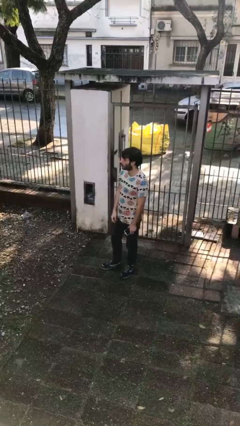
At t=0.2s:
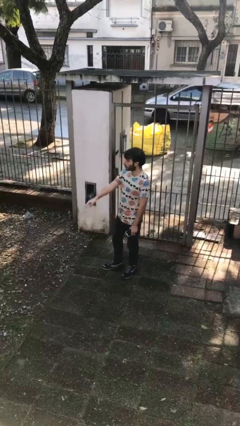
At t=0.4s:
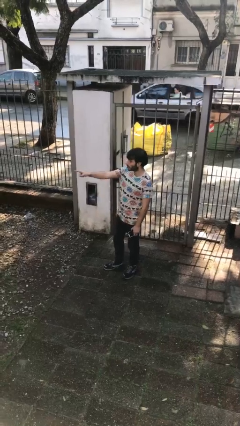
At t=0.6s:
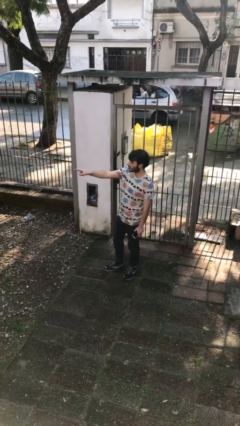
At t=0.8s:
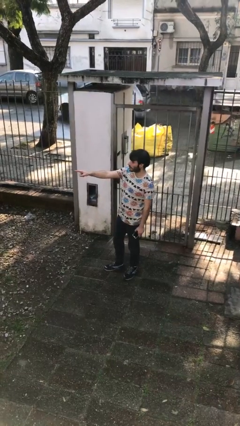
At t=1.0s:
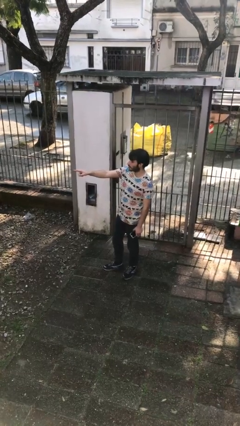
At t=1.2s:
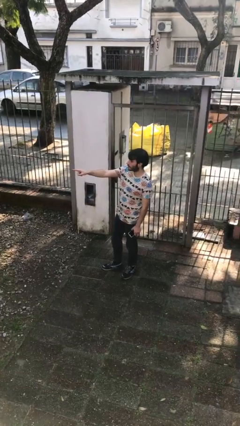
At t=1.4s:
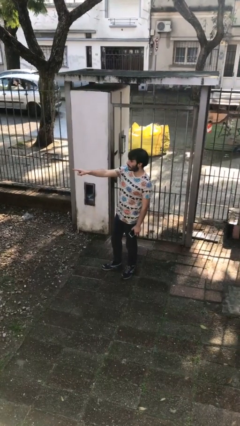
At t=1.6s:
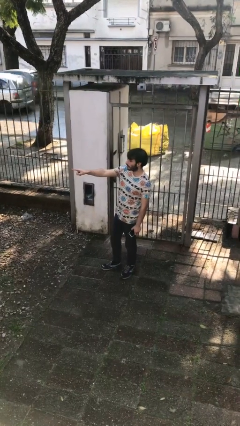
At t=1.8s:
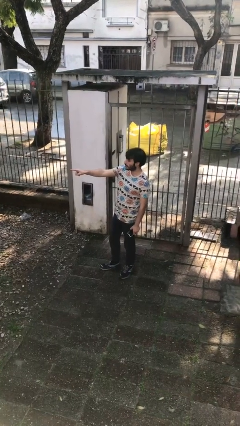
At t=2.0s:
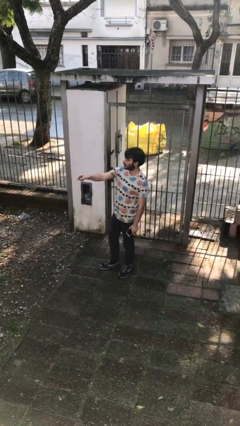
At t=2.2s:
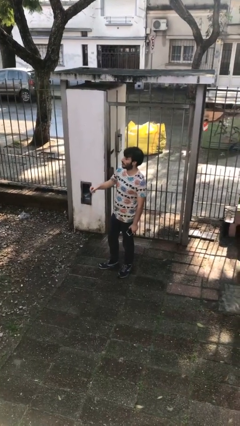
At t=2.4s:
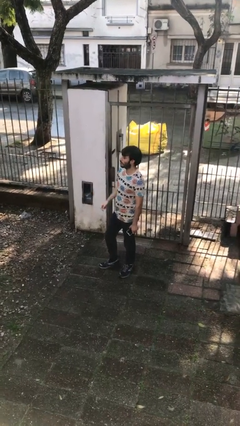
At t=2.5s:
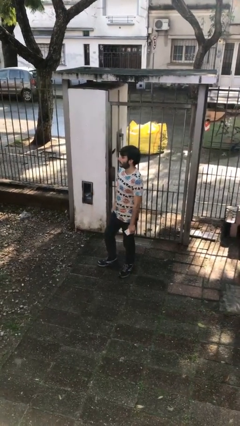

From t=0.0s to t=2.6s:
person points at person

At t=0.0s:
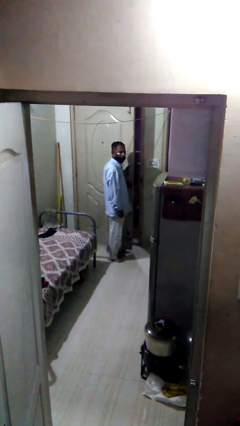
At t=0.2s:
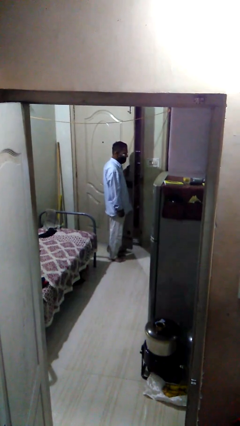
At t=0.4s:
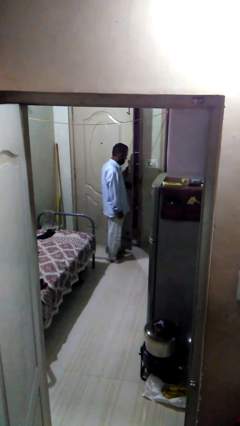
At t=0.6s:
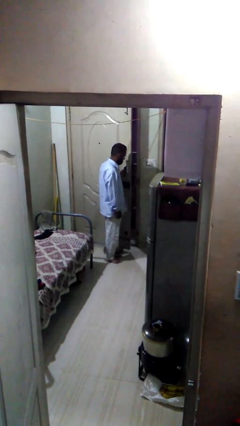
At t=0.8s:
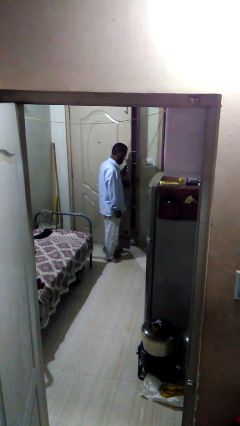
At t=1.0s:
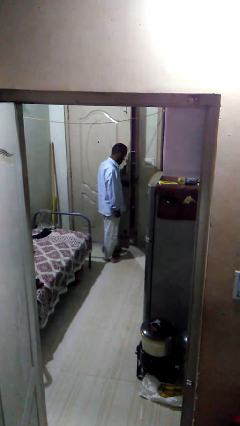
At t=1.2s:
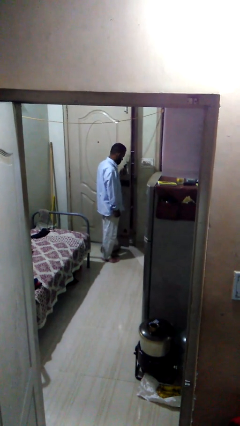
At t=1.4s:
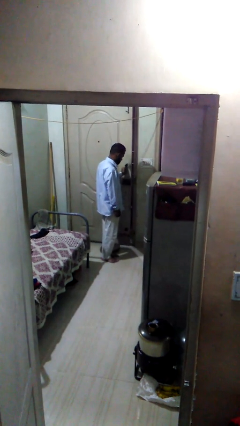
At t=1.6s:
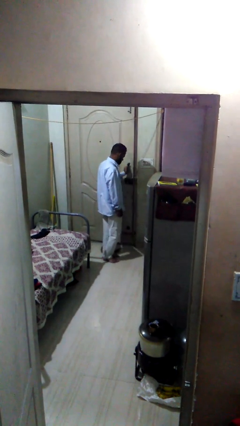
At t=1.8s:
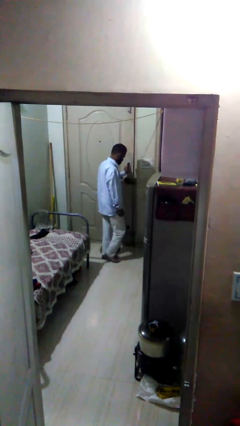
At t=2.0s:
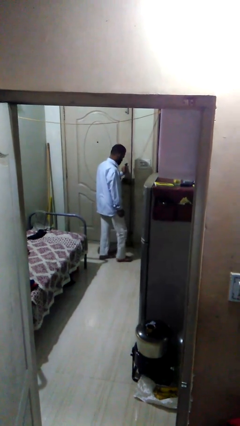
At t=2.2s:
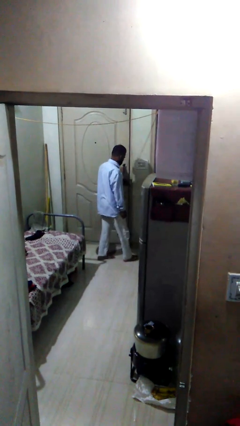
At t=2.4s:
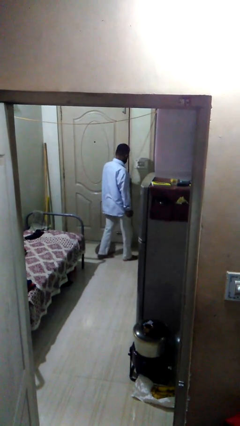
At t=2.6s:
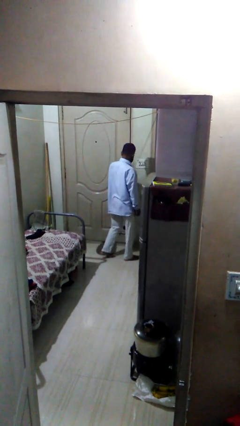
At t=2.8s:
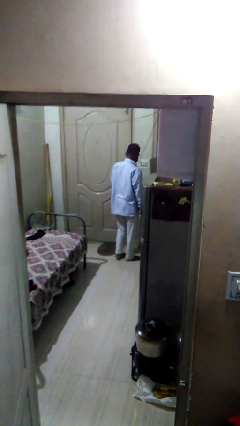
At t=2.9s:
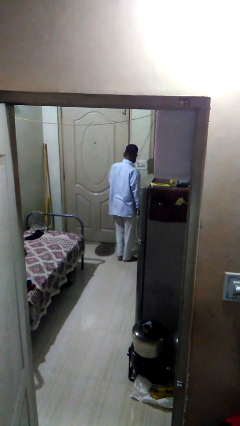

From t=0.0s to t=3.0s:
person closes facility door

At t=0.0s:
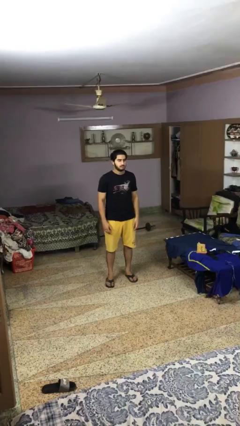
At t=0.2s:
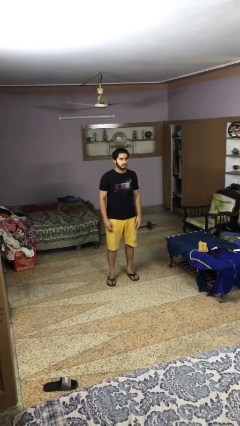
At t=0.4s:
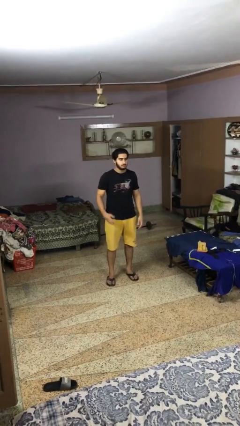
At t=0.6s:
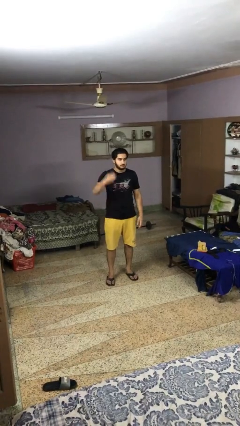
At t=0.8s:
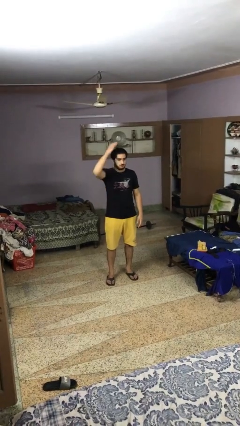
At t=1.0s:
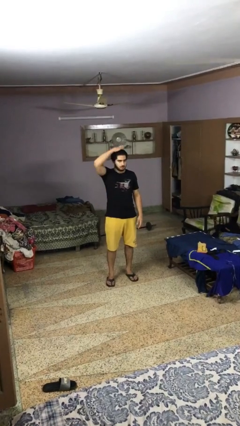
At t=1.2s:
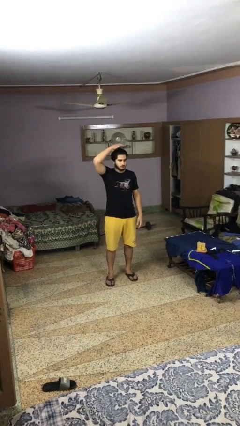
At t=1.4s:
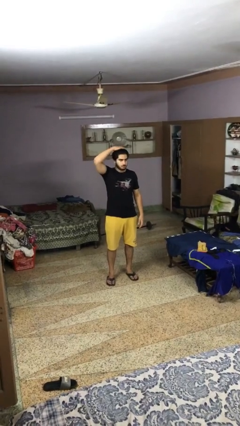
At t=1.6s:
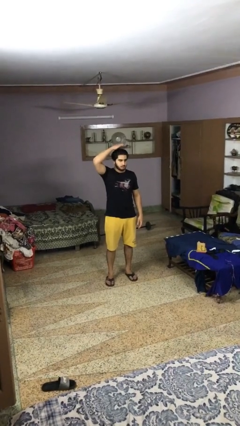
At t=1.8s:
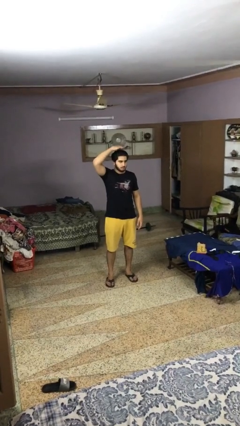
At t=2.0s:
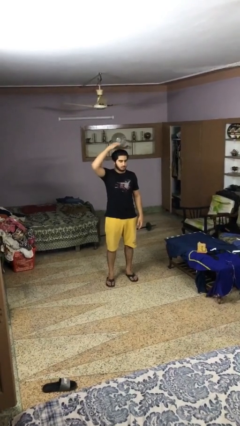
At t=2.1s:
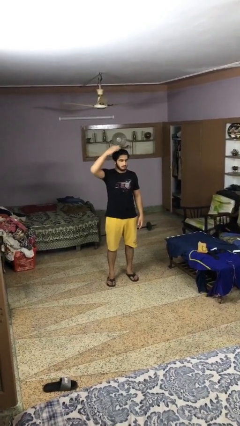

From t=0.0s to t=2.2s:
person pats head

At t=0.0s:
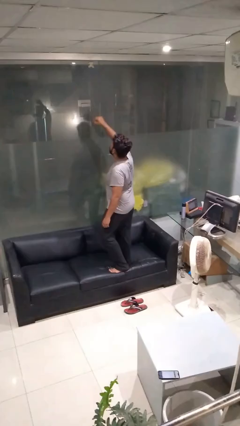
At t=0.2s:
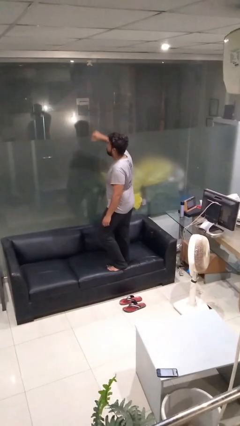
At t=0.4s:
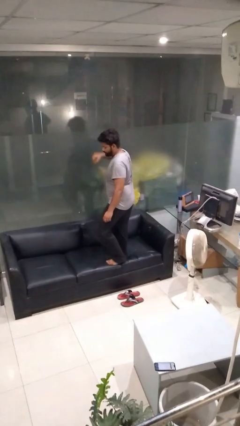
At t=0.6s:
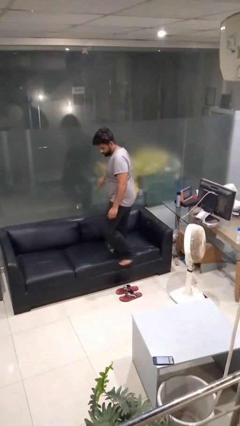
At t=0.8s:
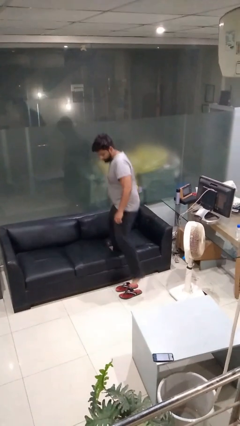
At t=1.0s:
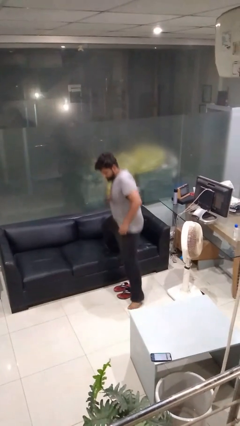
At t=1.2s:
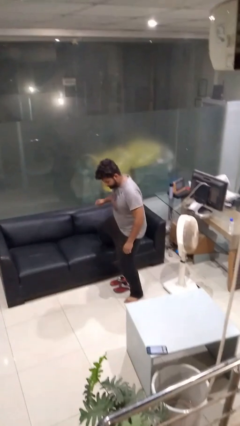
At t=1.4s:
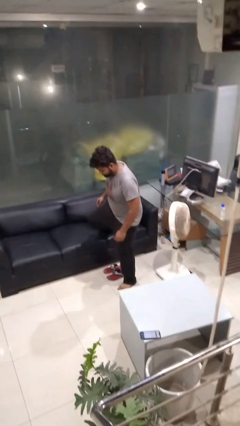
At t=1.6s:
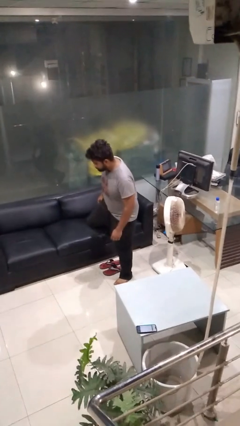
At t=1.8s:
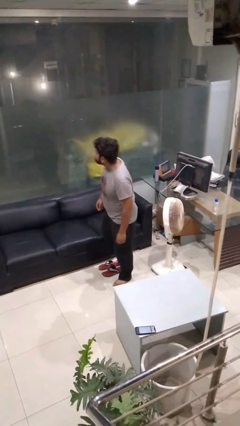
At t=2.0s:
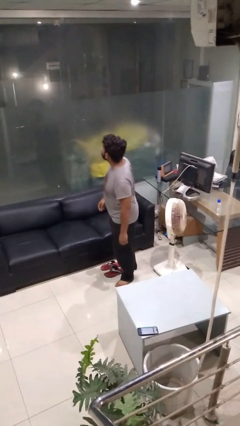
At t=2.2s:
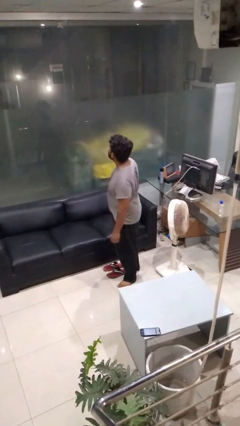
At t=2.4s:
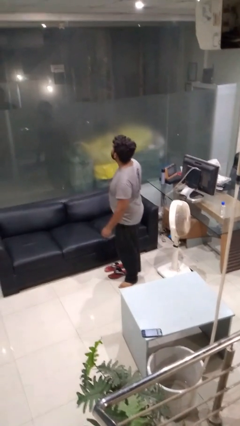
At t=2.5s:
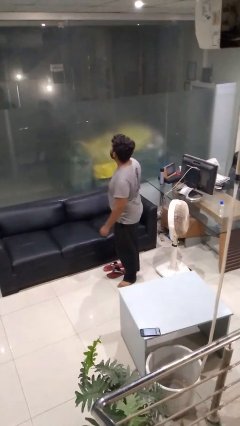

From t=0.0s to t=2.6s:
person climbs off couch

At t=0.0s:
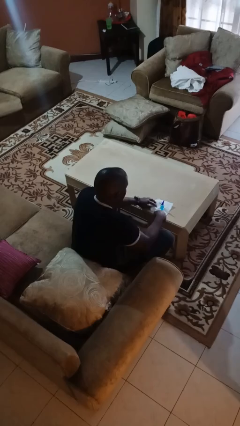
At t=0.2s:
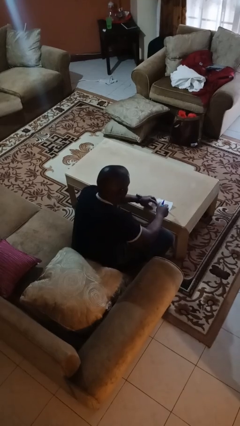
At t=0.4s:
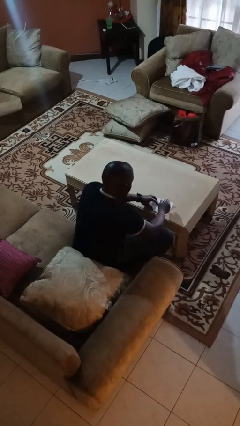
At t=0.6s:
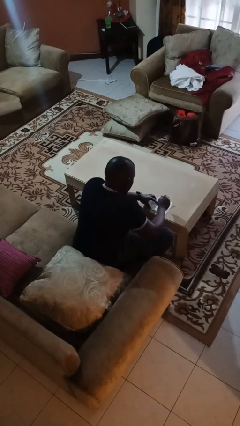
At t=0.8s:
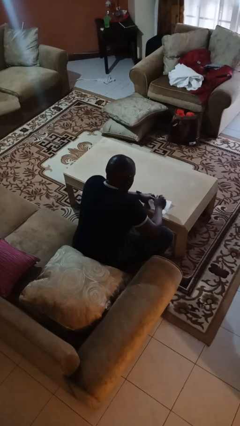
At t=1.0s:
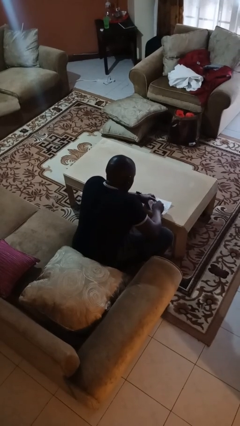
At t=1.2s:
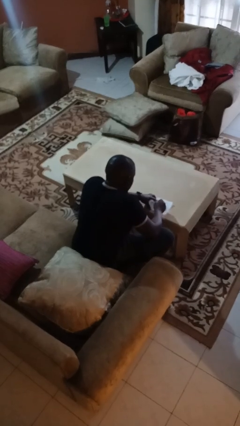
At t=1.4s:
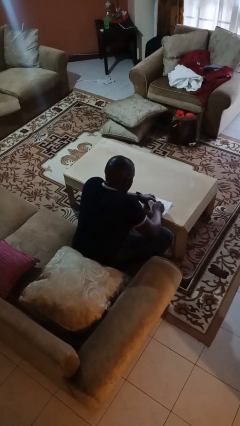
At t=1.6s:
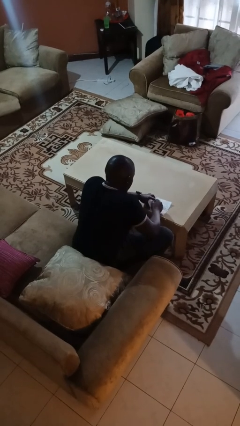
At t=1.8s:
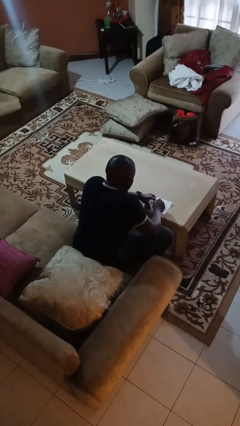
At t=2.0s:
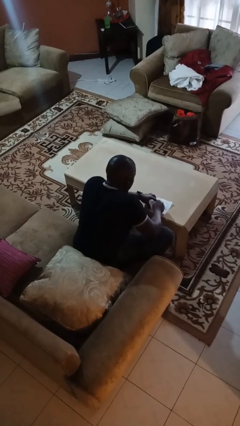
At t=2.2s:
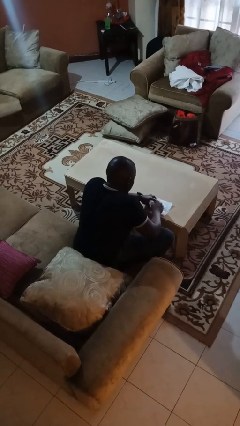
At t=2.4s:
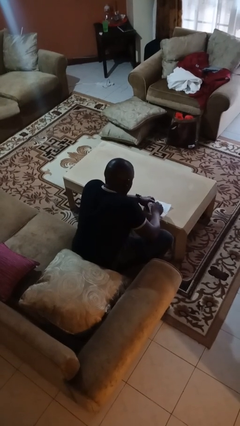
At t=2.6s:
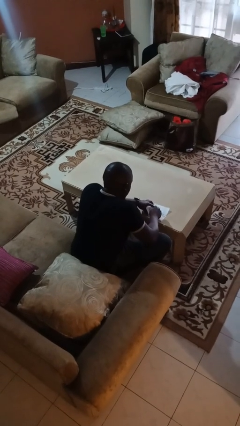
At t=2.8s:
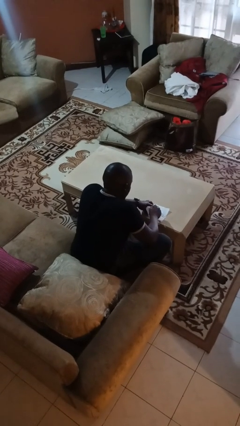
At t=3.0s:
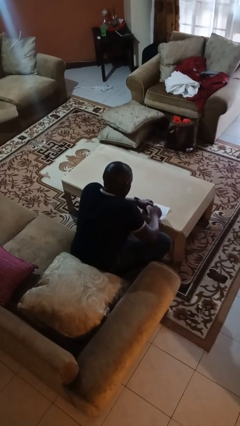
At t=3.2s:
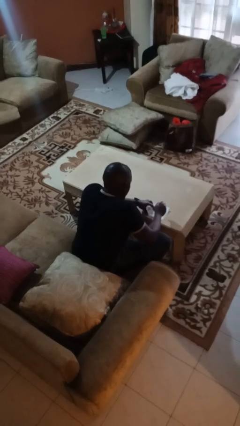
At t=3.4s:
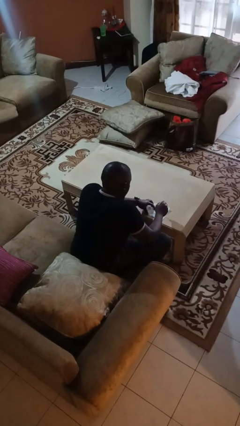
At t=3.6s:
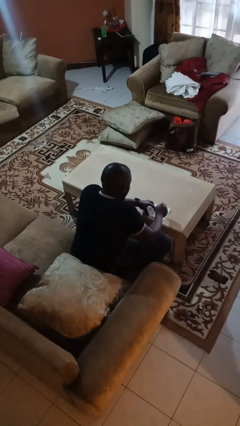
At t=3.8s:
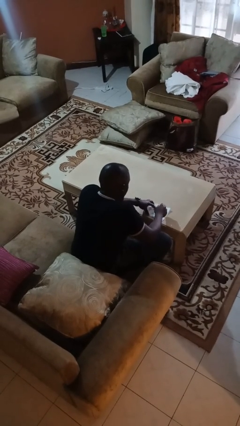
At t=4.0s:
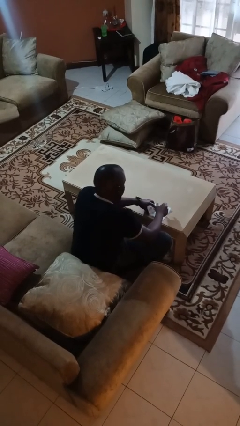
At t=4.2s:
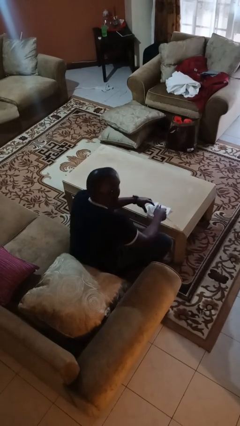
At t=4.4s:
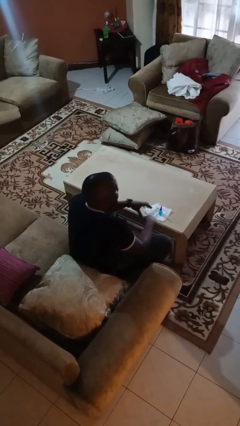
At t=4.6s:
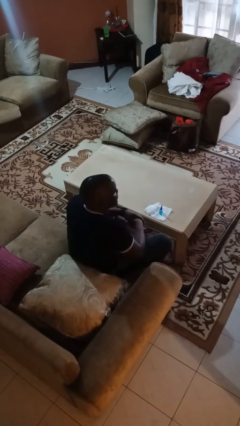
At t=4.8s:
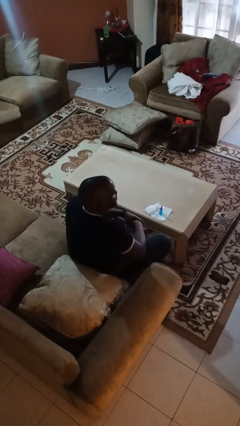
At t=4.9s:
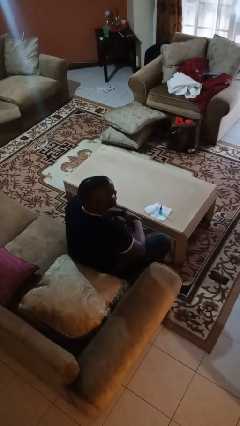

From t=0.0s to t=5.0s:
person paints fingernails

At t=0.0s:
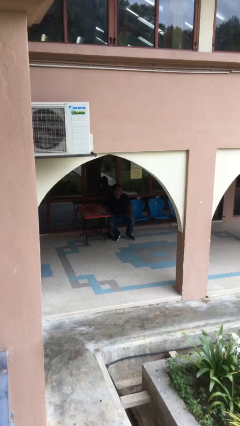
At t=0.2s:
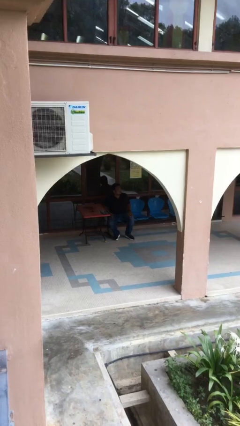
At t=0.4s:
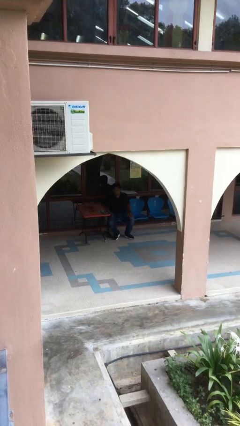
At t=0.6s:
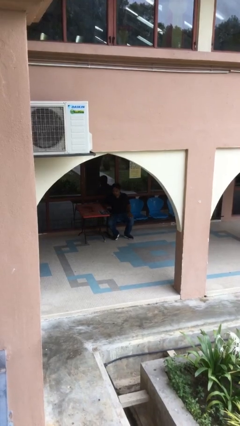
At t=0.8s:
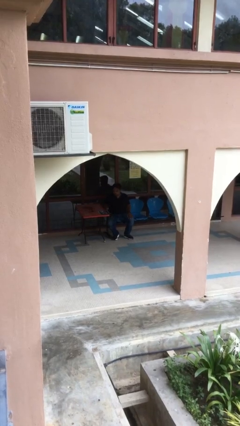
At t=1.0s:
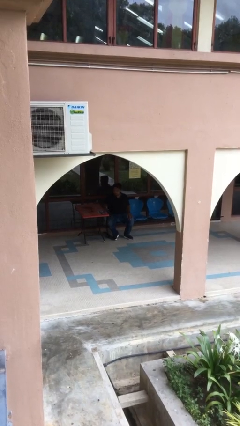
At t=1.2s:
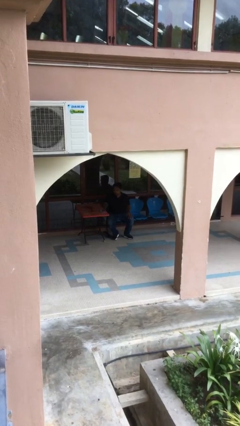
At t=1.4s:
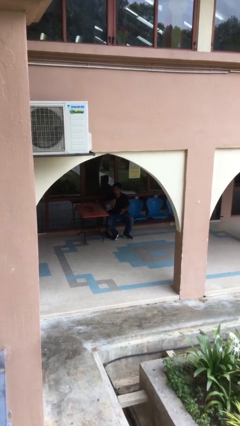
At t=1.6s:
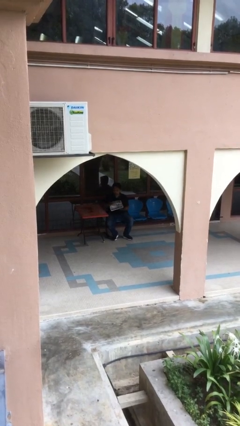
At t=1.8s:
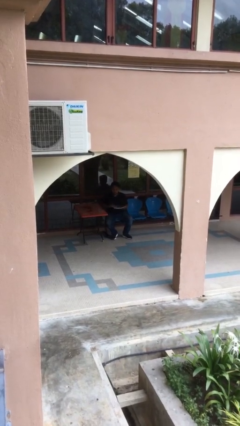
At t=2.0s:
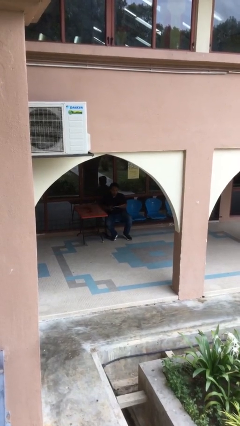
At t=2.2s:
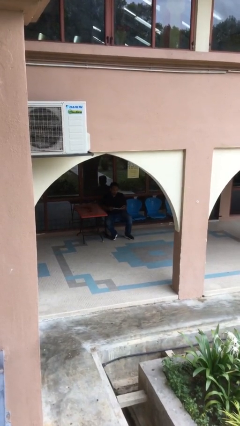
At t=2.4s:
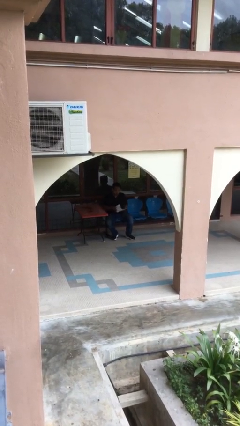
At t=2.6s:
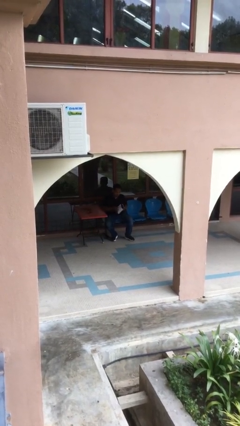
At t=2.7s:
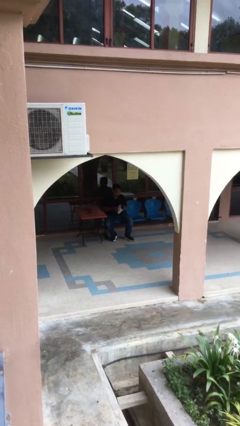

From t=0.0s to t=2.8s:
person picks up object from table
